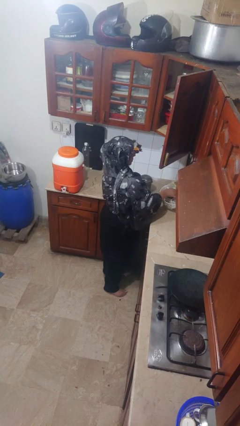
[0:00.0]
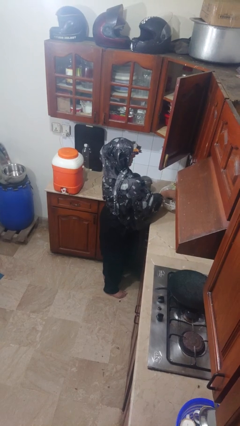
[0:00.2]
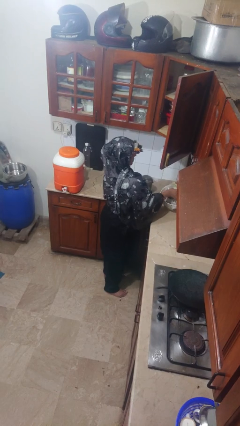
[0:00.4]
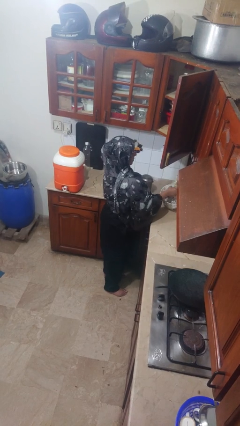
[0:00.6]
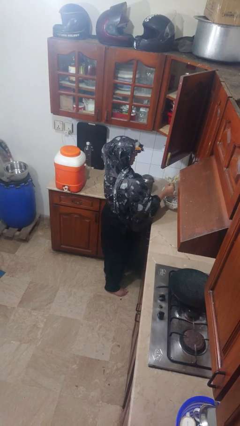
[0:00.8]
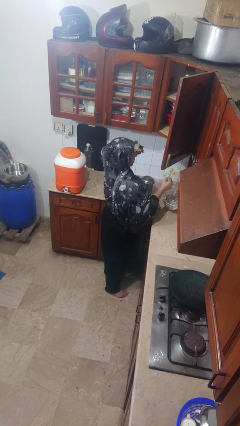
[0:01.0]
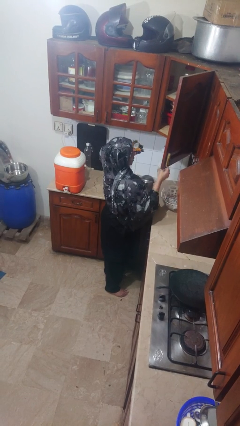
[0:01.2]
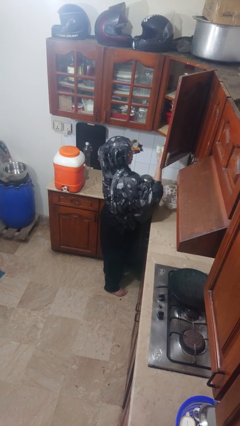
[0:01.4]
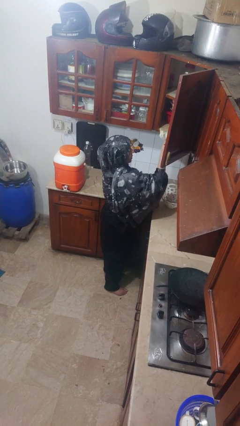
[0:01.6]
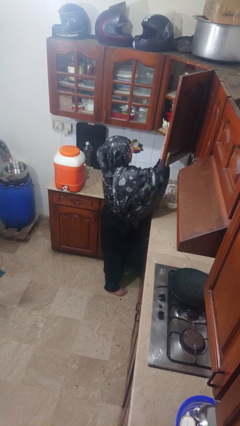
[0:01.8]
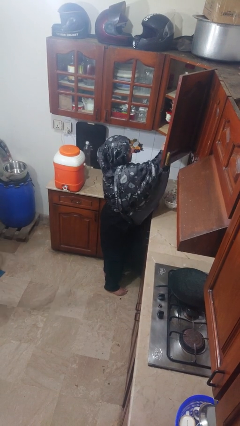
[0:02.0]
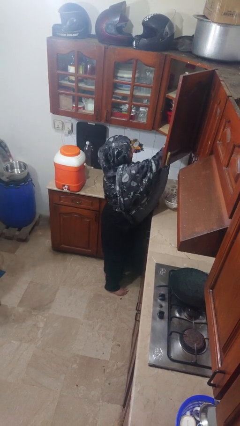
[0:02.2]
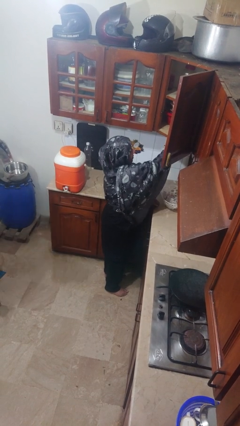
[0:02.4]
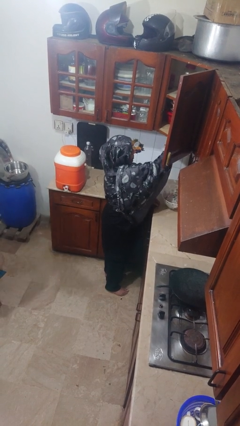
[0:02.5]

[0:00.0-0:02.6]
person loads groceries into cabinet

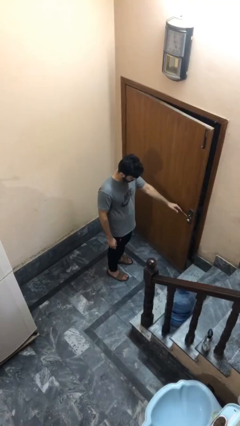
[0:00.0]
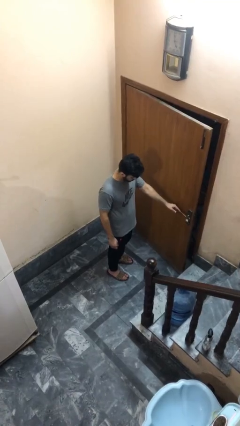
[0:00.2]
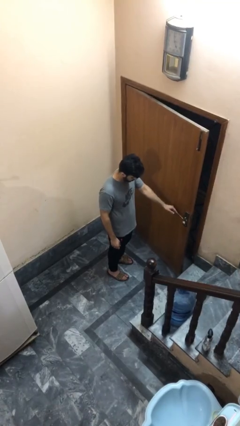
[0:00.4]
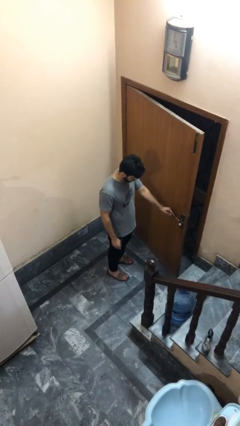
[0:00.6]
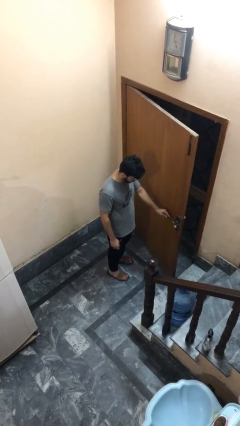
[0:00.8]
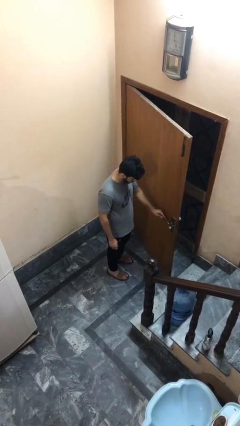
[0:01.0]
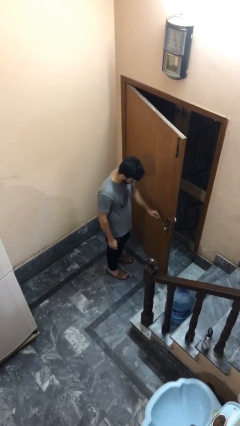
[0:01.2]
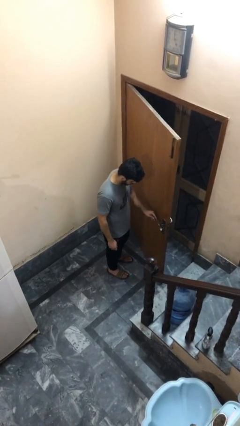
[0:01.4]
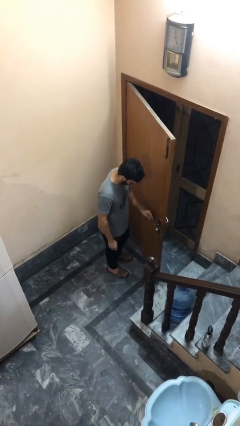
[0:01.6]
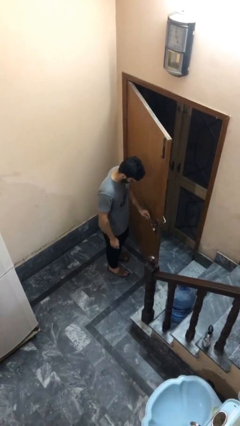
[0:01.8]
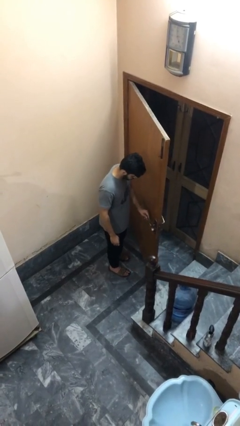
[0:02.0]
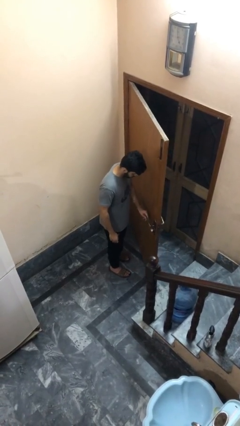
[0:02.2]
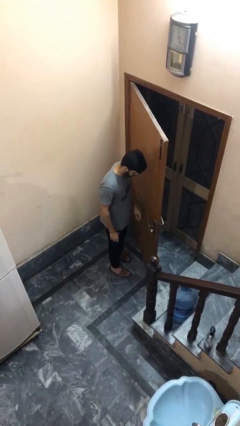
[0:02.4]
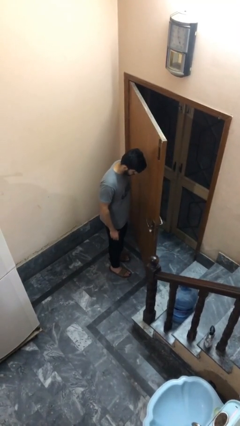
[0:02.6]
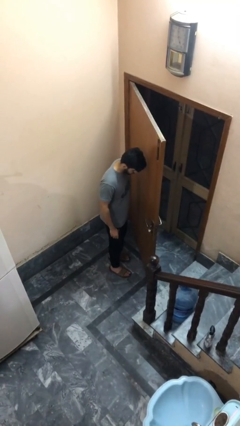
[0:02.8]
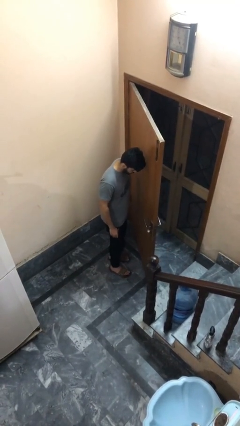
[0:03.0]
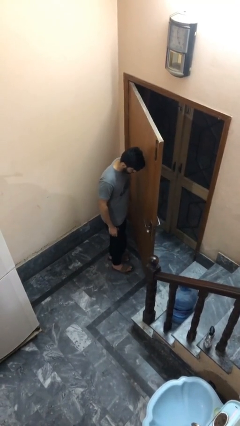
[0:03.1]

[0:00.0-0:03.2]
person opens facility door

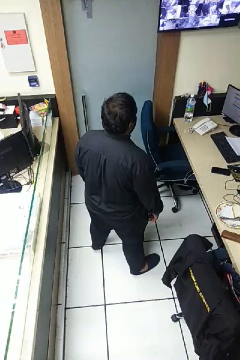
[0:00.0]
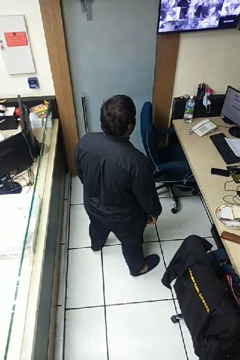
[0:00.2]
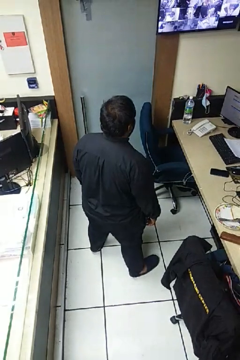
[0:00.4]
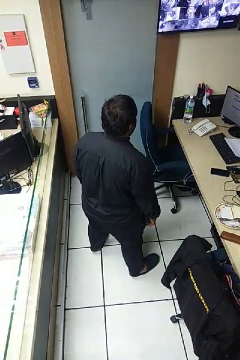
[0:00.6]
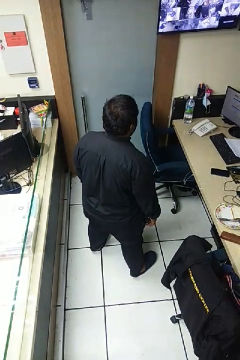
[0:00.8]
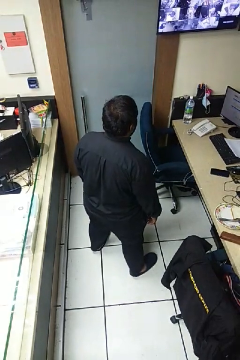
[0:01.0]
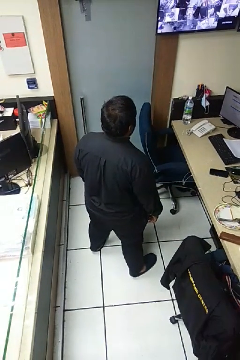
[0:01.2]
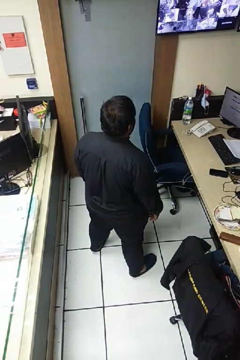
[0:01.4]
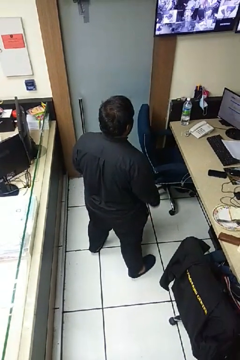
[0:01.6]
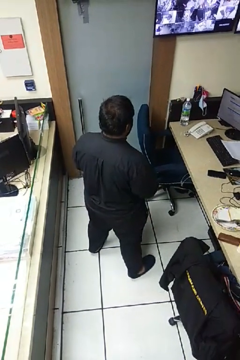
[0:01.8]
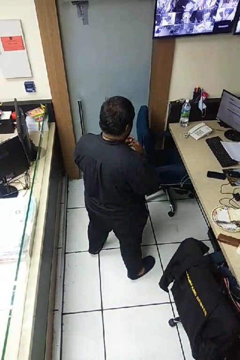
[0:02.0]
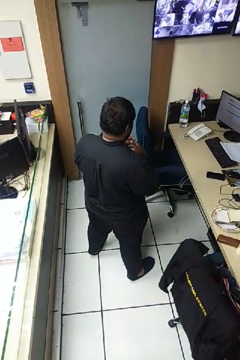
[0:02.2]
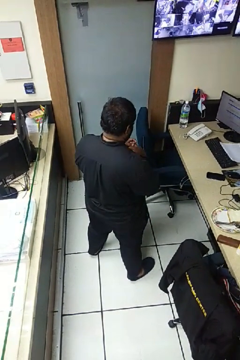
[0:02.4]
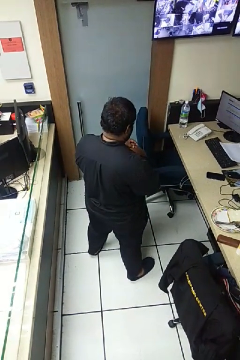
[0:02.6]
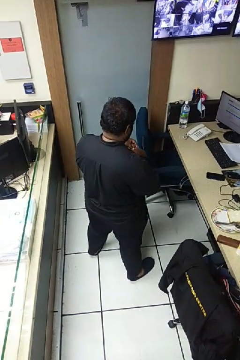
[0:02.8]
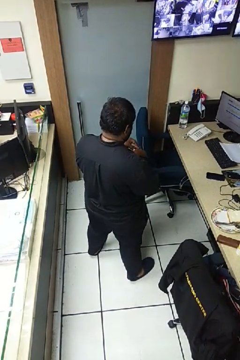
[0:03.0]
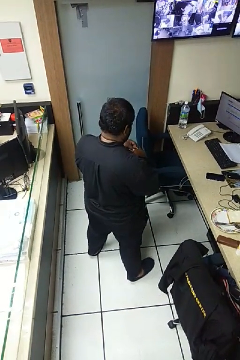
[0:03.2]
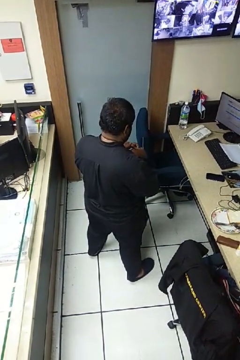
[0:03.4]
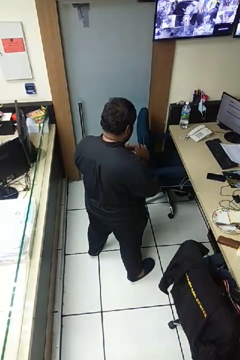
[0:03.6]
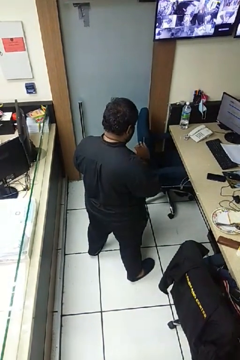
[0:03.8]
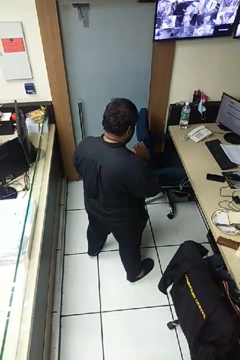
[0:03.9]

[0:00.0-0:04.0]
person puts on ring

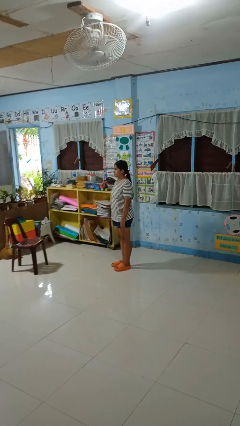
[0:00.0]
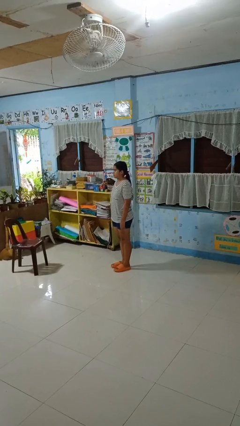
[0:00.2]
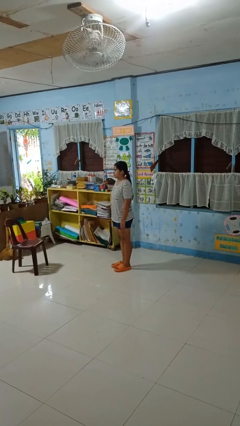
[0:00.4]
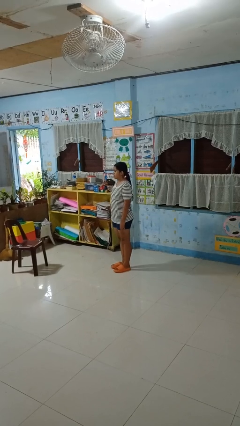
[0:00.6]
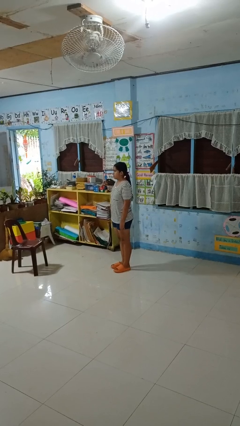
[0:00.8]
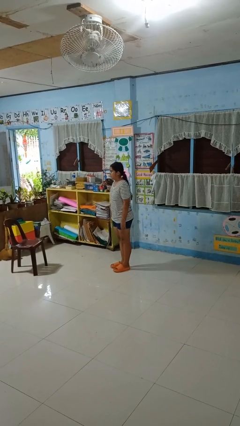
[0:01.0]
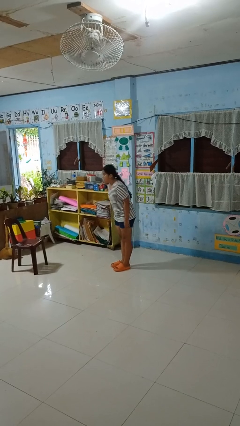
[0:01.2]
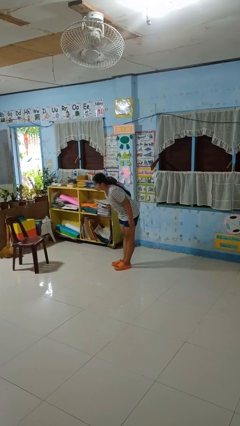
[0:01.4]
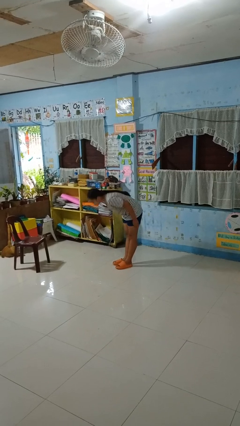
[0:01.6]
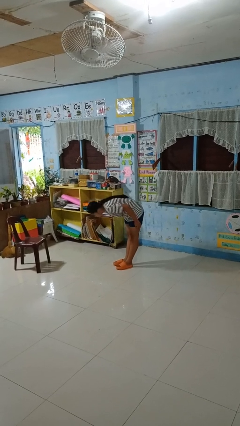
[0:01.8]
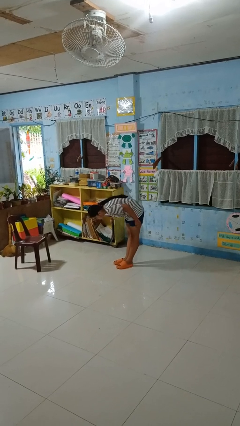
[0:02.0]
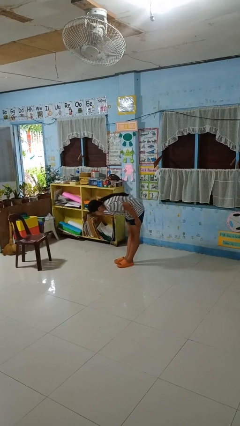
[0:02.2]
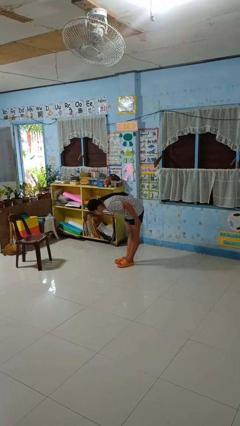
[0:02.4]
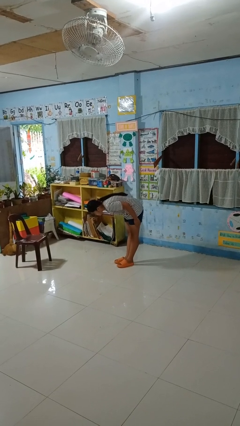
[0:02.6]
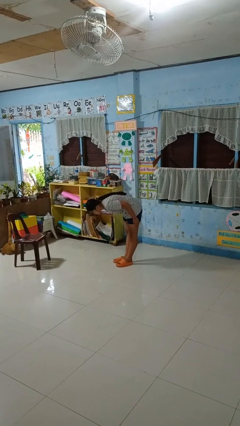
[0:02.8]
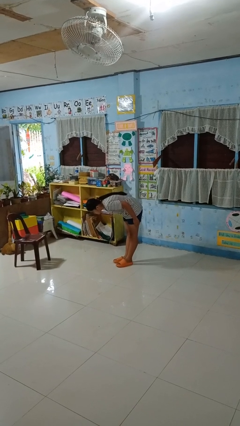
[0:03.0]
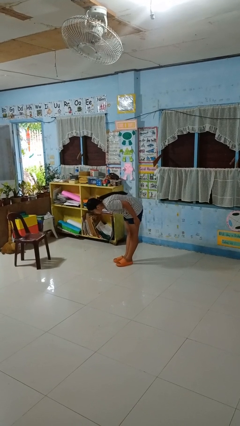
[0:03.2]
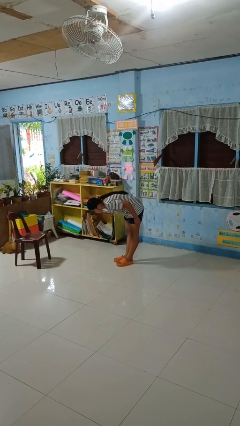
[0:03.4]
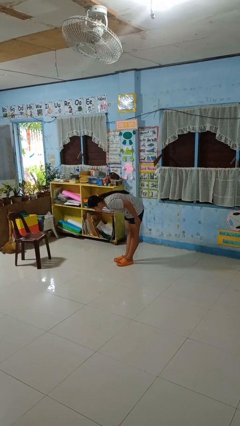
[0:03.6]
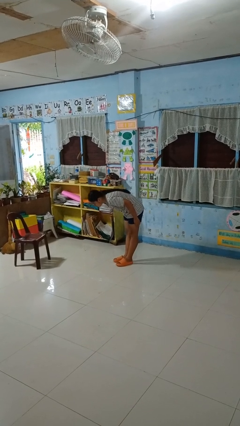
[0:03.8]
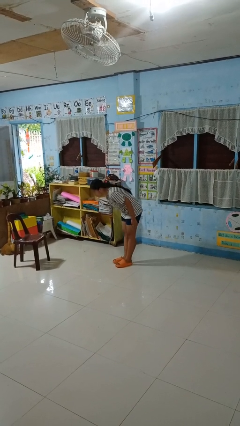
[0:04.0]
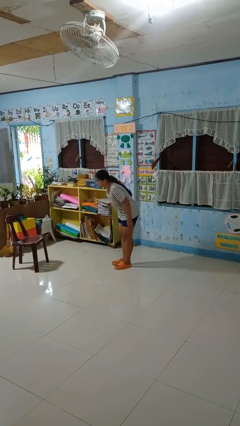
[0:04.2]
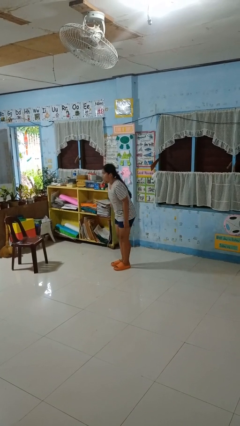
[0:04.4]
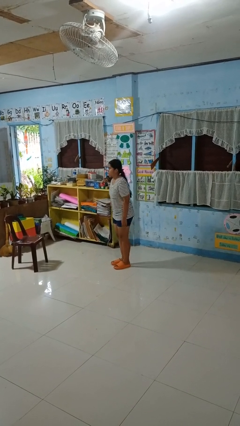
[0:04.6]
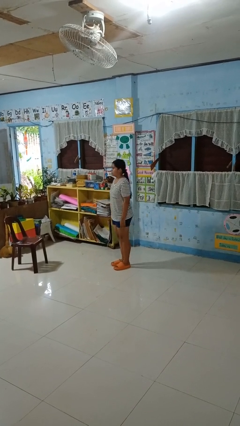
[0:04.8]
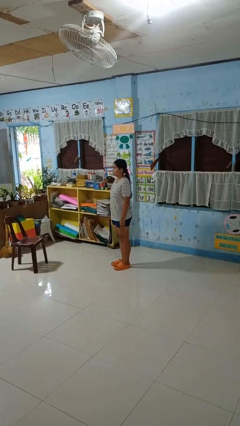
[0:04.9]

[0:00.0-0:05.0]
person bows

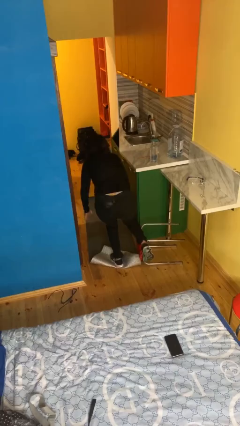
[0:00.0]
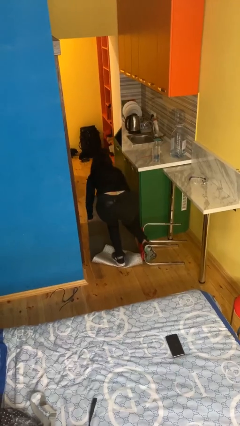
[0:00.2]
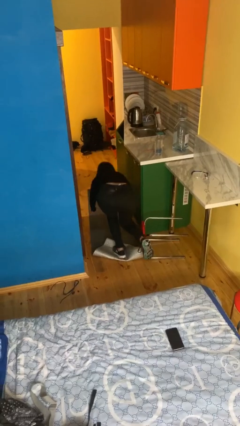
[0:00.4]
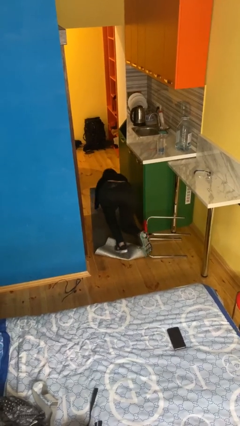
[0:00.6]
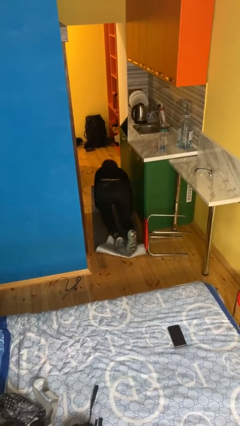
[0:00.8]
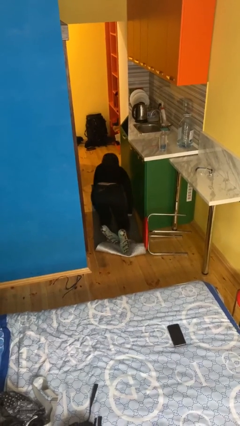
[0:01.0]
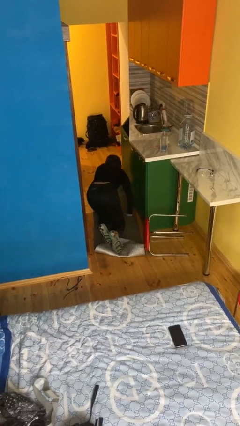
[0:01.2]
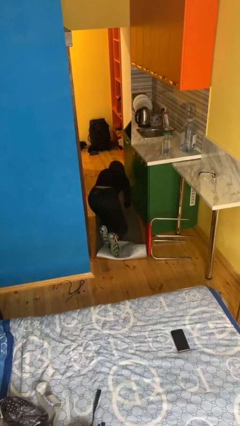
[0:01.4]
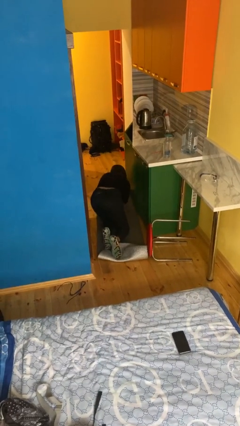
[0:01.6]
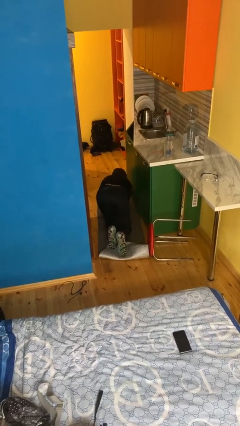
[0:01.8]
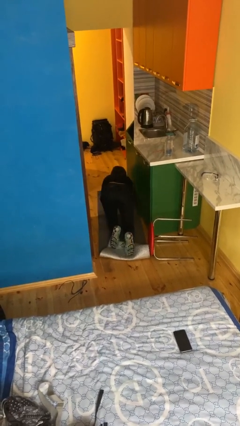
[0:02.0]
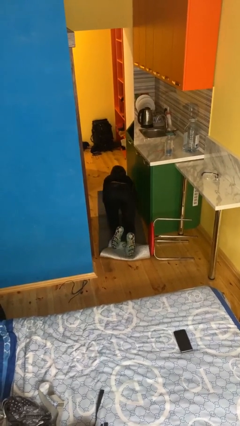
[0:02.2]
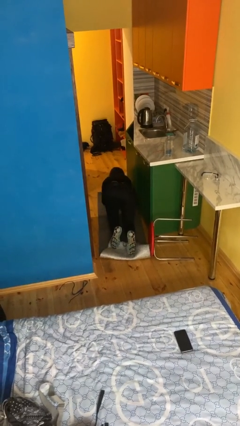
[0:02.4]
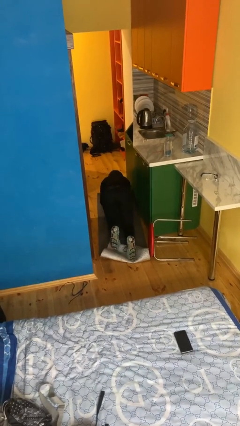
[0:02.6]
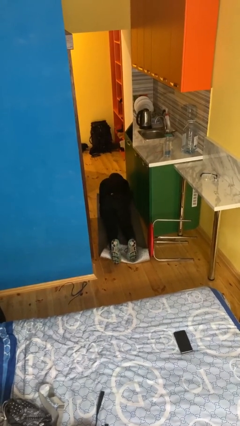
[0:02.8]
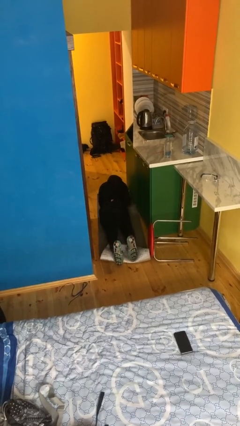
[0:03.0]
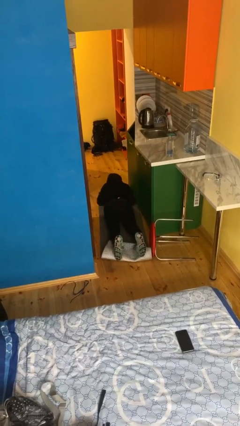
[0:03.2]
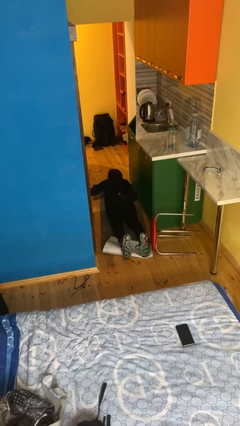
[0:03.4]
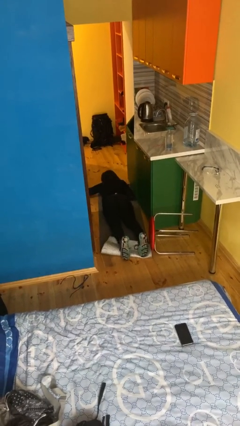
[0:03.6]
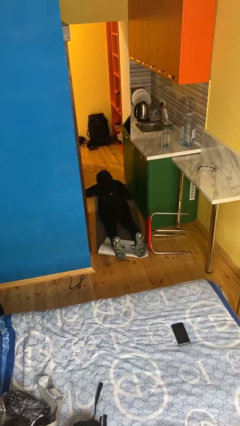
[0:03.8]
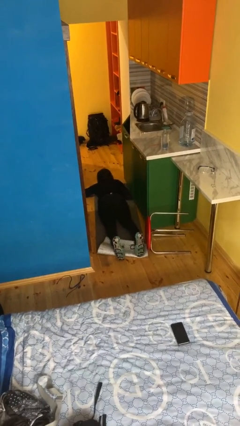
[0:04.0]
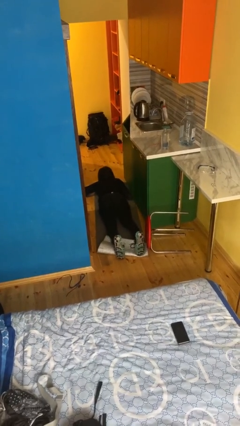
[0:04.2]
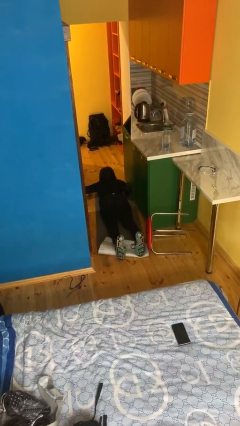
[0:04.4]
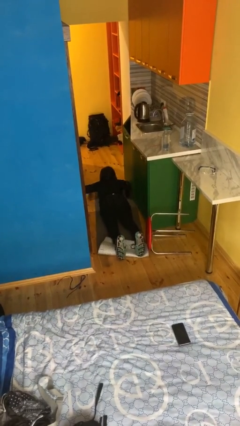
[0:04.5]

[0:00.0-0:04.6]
person lies down on floor
